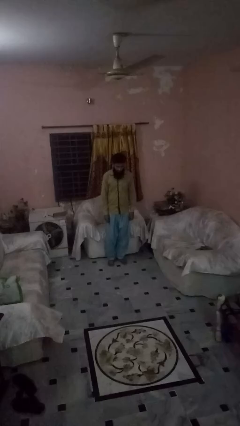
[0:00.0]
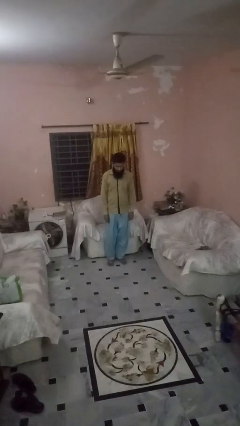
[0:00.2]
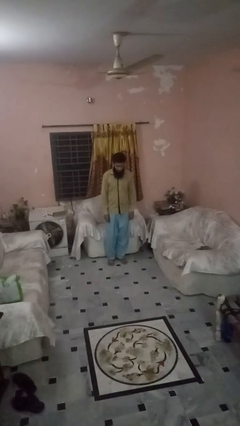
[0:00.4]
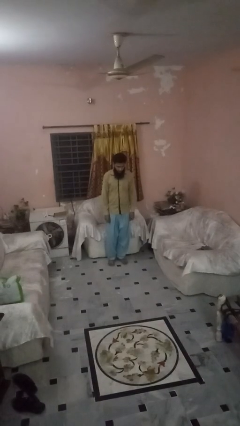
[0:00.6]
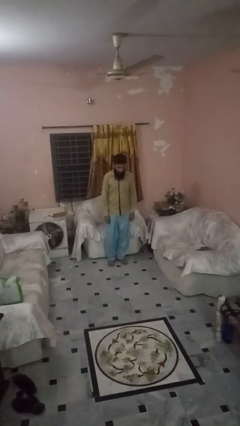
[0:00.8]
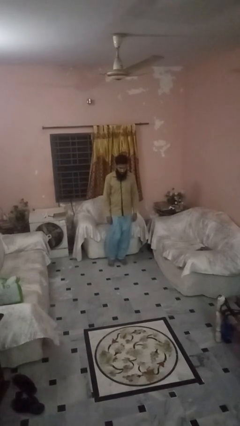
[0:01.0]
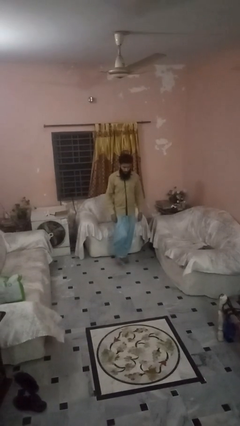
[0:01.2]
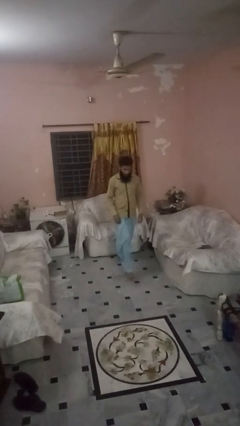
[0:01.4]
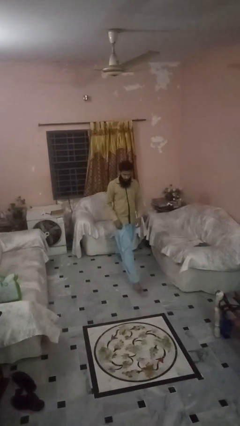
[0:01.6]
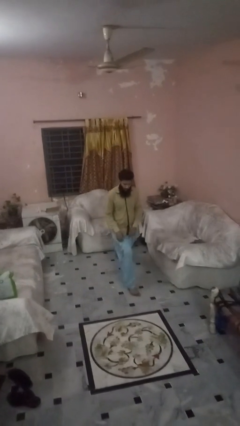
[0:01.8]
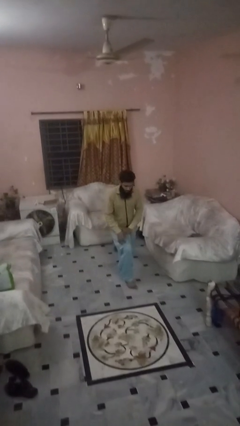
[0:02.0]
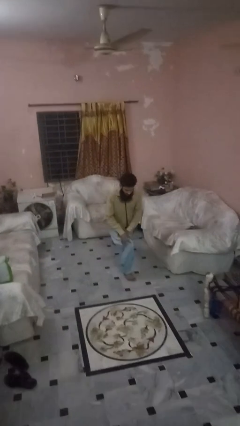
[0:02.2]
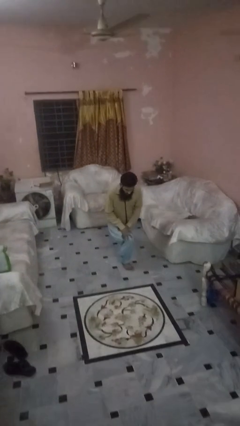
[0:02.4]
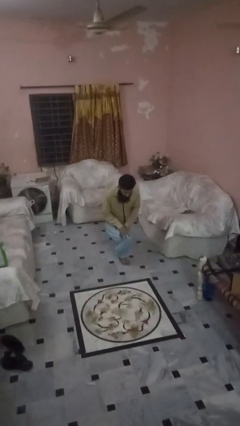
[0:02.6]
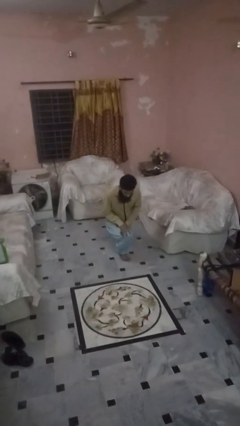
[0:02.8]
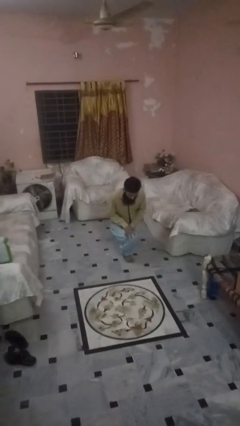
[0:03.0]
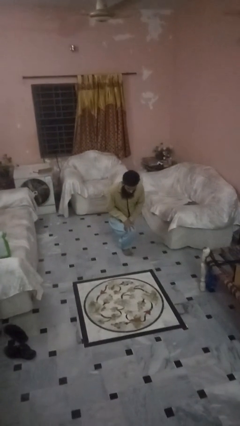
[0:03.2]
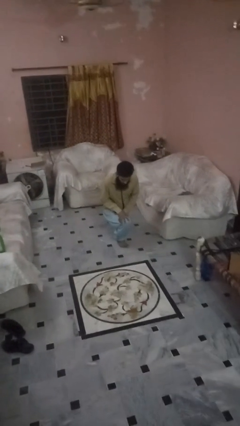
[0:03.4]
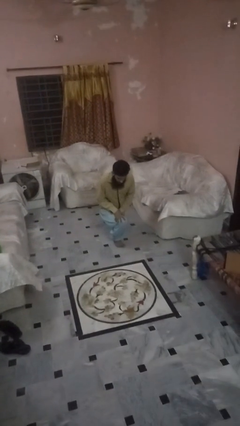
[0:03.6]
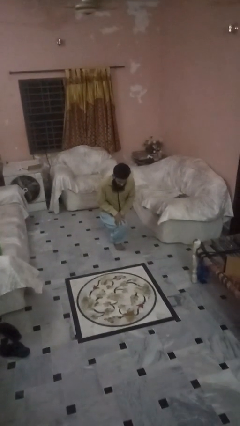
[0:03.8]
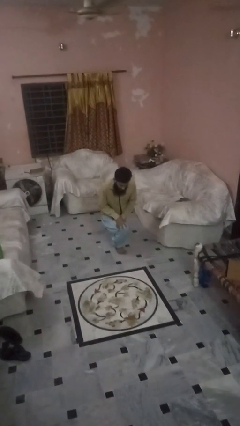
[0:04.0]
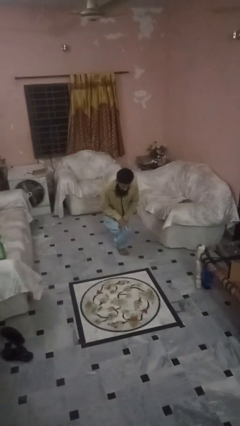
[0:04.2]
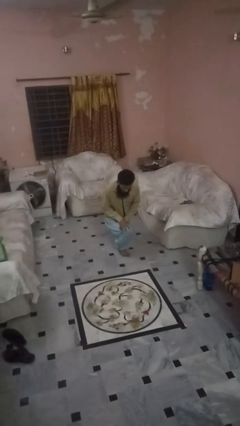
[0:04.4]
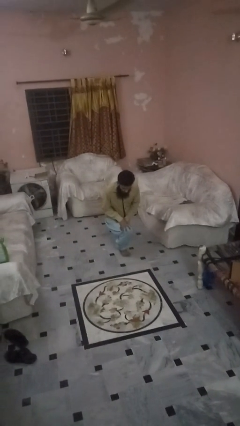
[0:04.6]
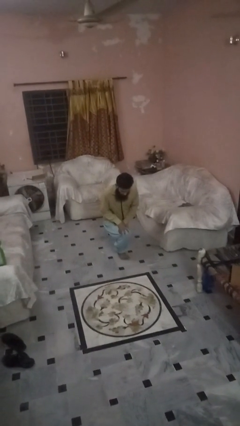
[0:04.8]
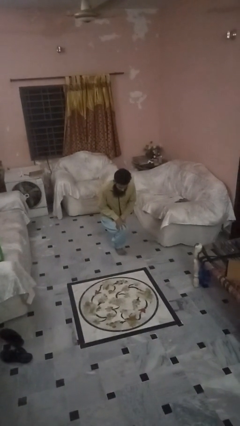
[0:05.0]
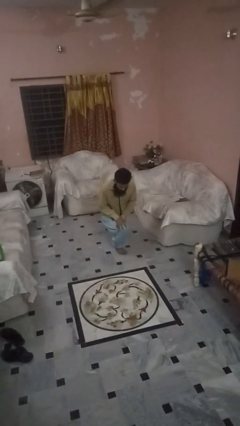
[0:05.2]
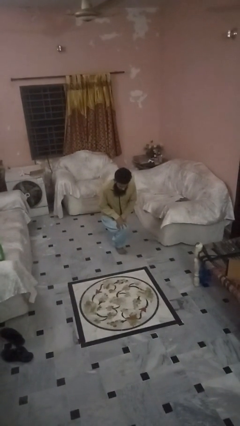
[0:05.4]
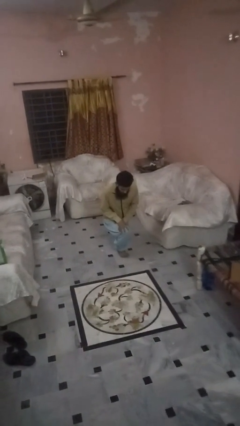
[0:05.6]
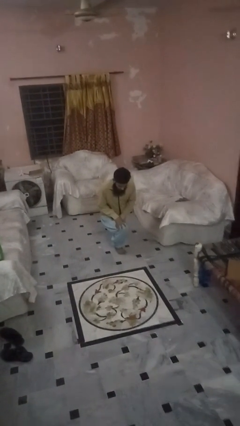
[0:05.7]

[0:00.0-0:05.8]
person exercises with lunges

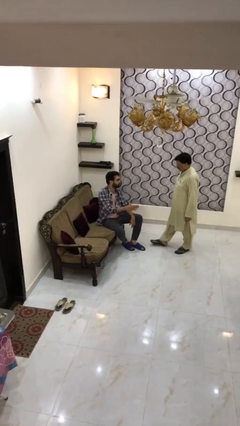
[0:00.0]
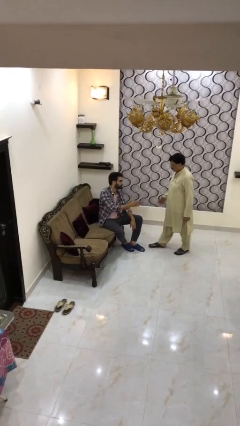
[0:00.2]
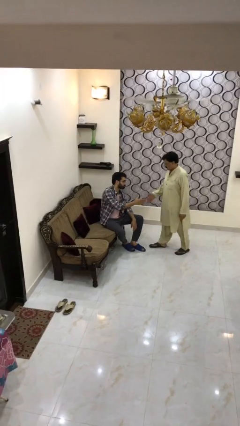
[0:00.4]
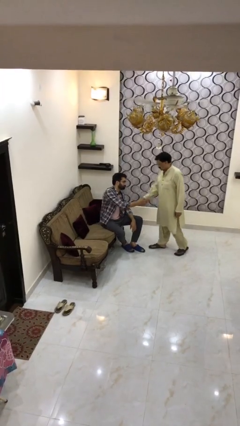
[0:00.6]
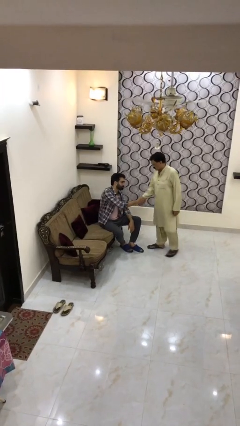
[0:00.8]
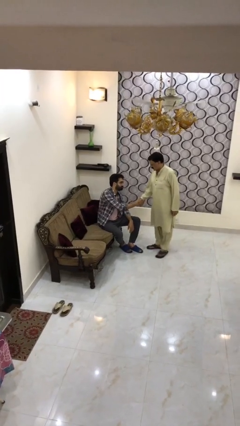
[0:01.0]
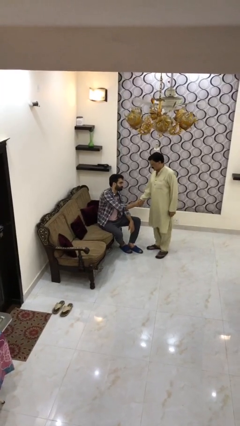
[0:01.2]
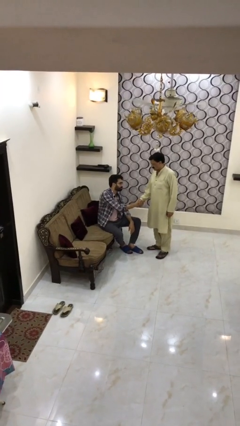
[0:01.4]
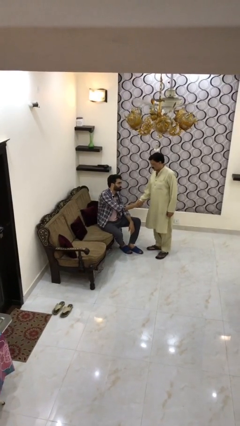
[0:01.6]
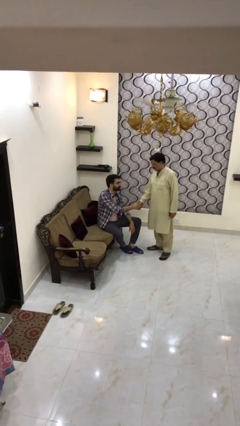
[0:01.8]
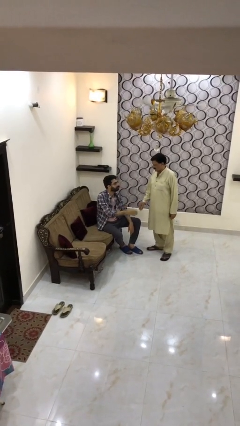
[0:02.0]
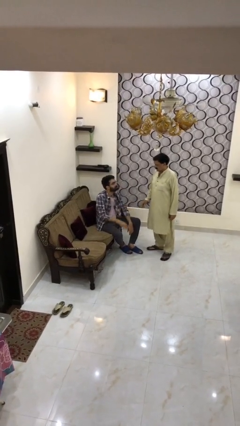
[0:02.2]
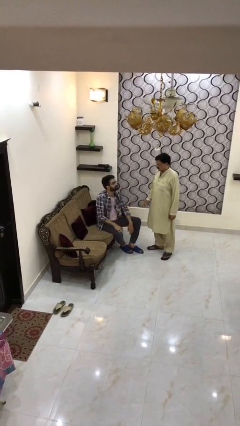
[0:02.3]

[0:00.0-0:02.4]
person shakes hand

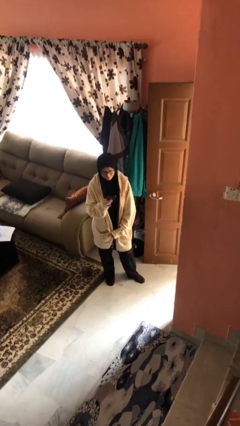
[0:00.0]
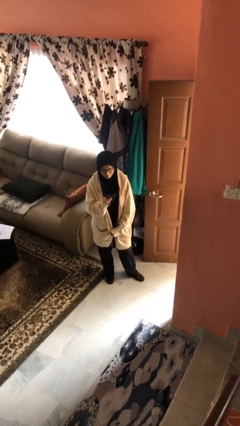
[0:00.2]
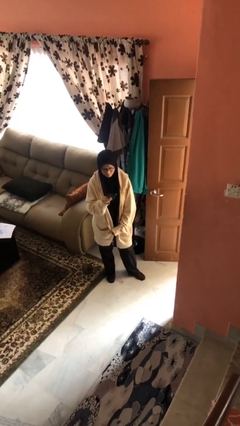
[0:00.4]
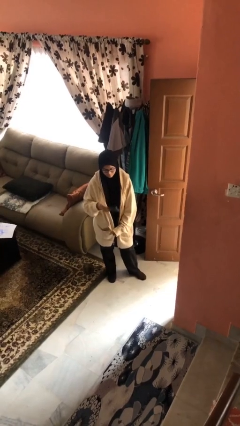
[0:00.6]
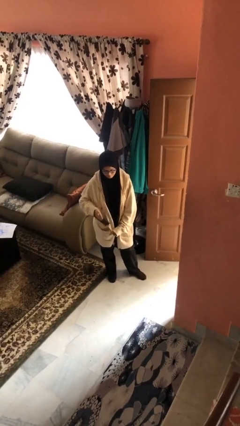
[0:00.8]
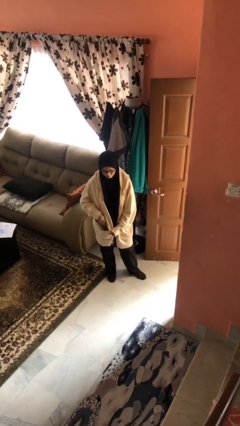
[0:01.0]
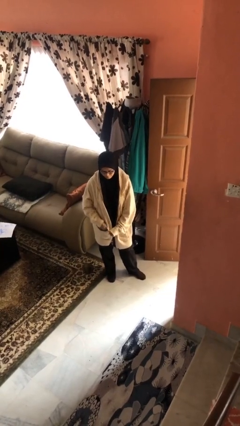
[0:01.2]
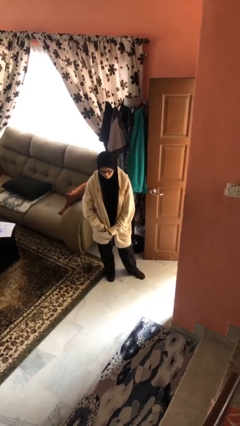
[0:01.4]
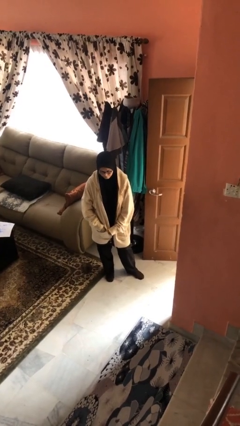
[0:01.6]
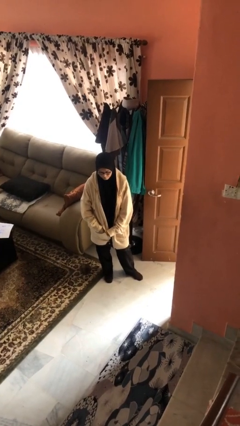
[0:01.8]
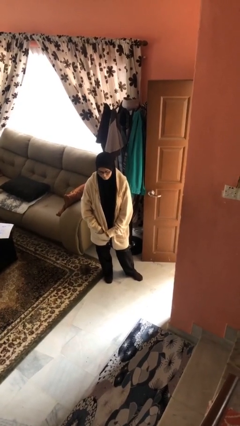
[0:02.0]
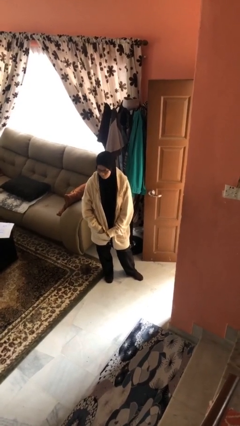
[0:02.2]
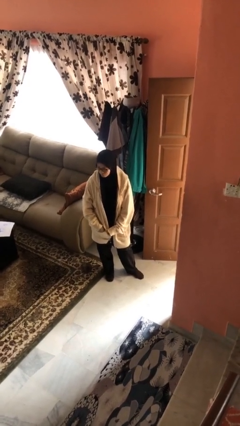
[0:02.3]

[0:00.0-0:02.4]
person puts phone into pocket

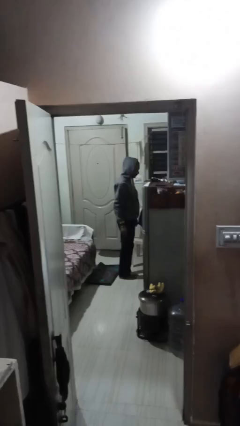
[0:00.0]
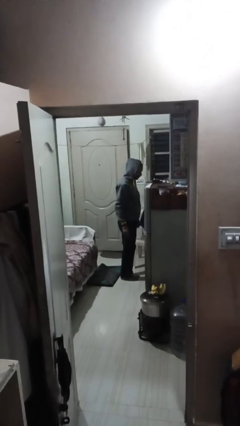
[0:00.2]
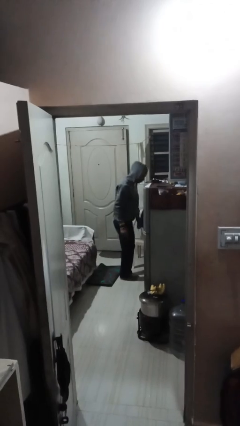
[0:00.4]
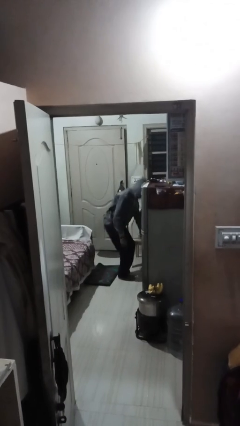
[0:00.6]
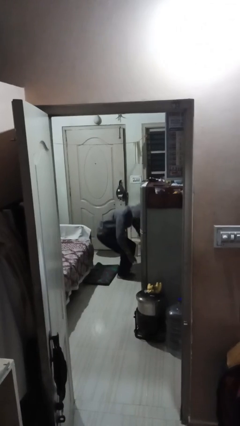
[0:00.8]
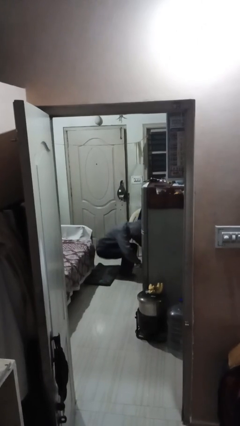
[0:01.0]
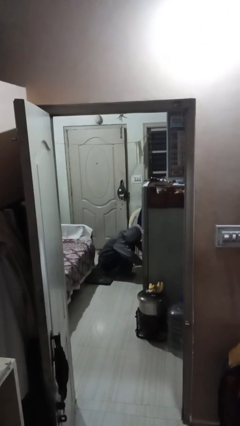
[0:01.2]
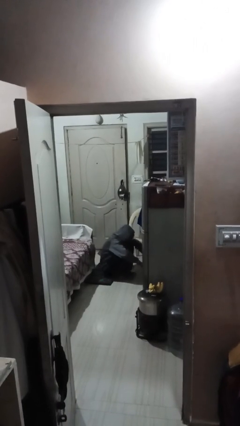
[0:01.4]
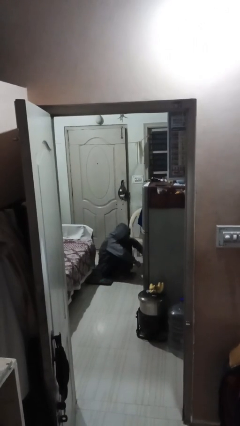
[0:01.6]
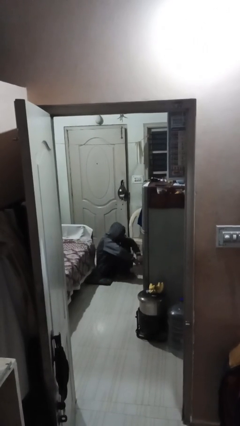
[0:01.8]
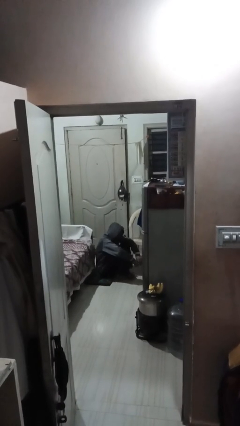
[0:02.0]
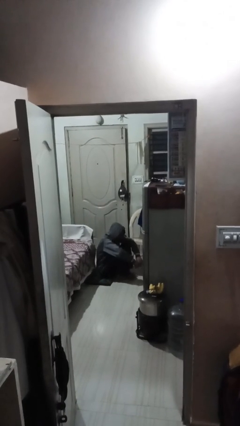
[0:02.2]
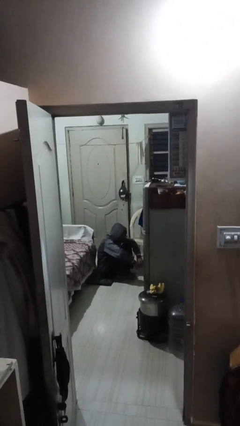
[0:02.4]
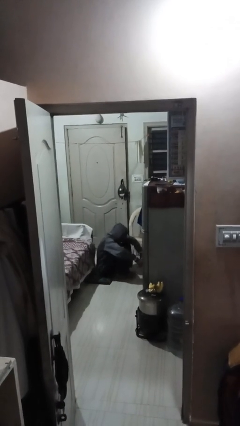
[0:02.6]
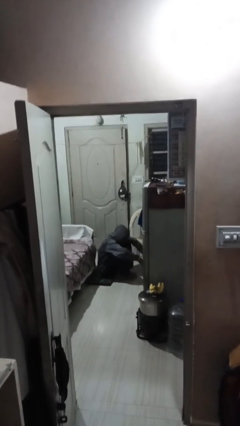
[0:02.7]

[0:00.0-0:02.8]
person sits down

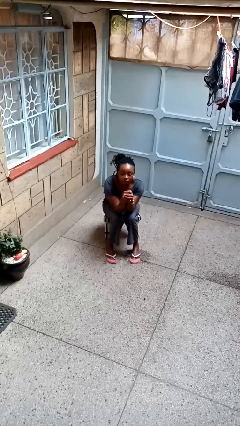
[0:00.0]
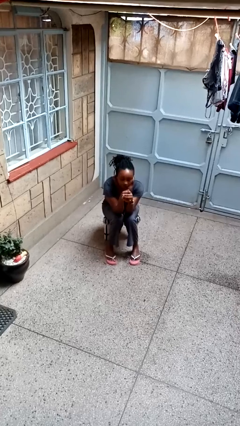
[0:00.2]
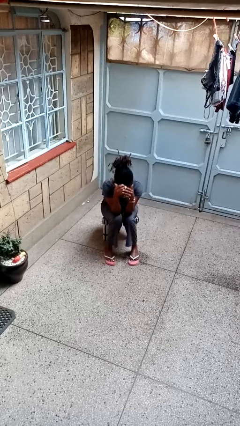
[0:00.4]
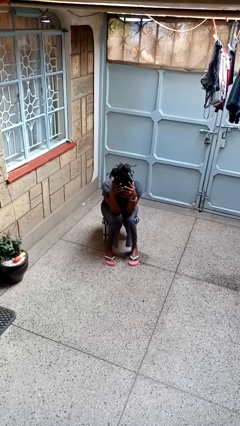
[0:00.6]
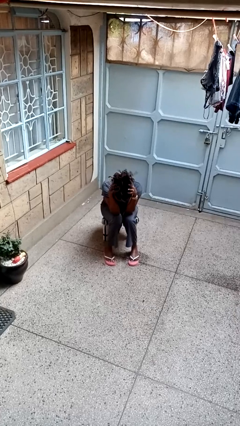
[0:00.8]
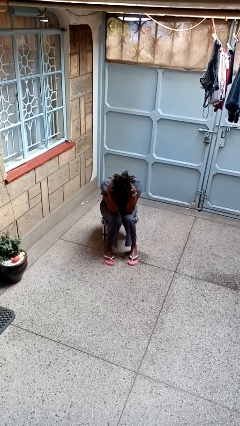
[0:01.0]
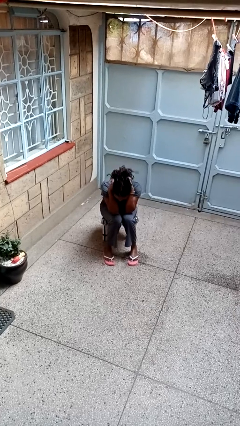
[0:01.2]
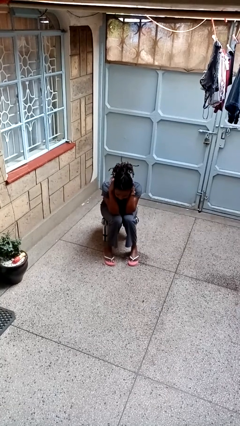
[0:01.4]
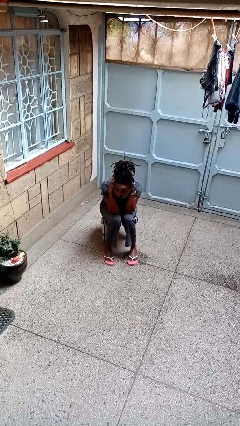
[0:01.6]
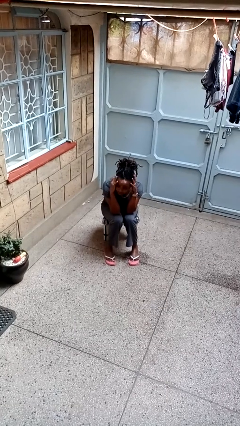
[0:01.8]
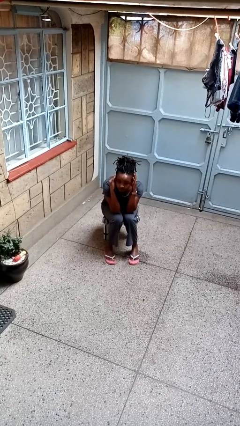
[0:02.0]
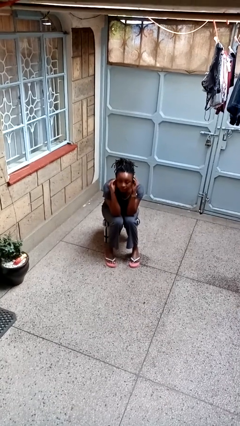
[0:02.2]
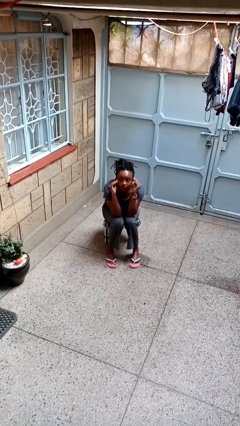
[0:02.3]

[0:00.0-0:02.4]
person strokes hair

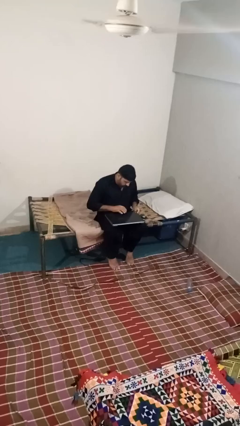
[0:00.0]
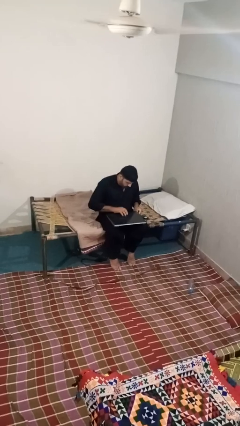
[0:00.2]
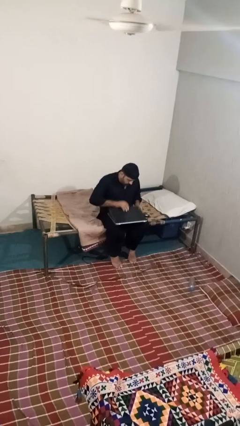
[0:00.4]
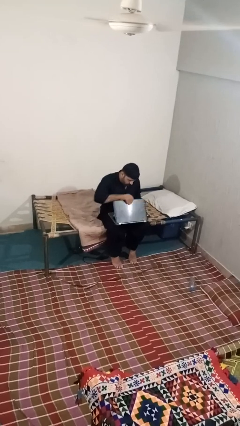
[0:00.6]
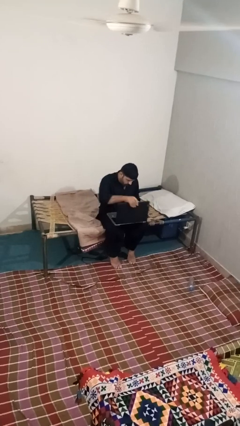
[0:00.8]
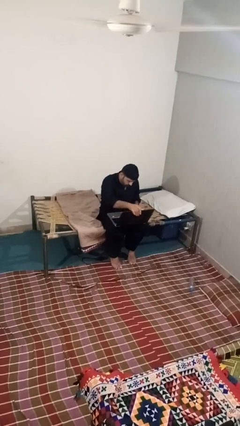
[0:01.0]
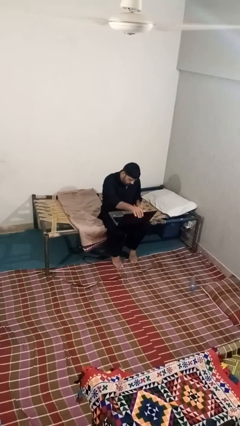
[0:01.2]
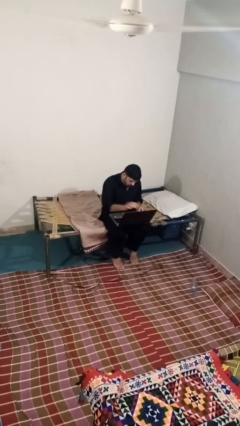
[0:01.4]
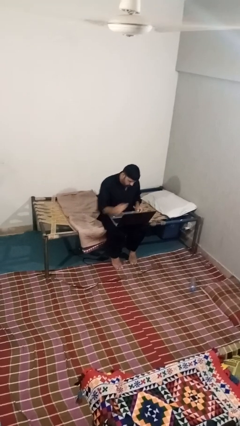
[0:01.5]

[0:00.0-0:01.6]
person opens laptop
